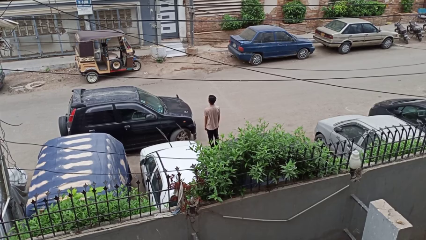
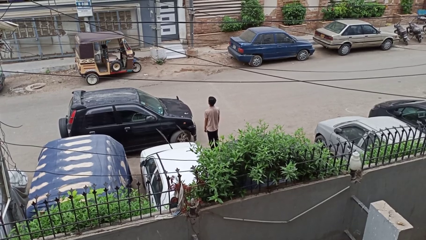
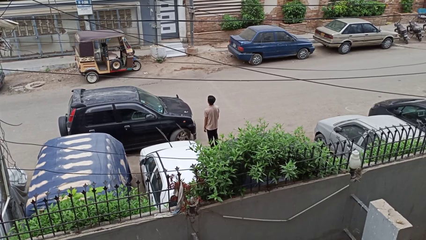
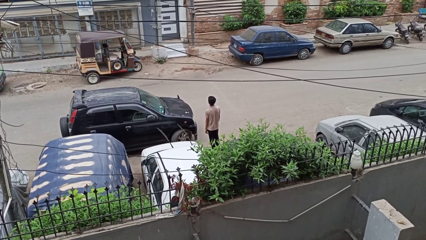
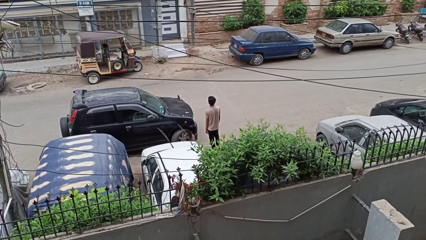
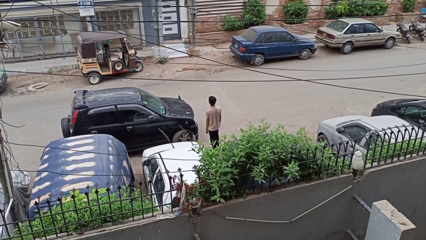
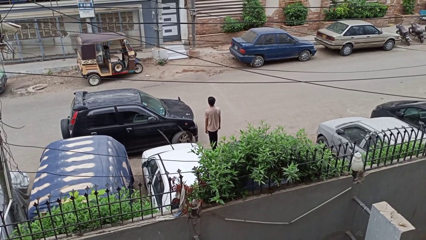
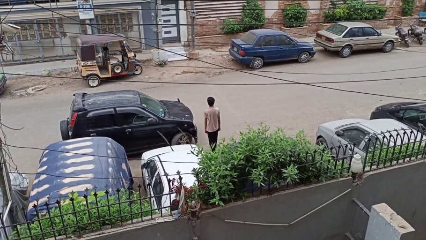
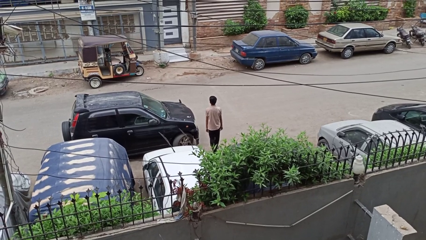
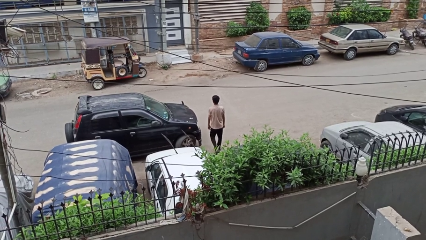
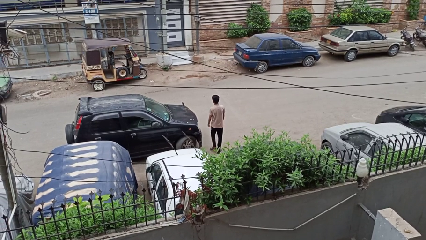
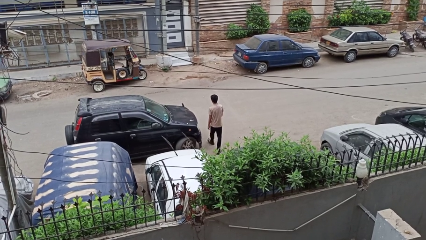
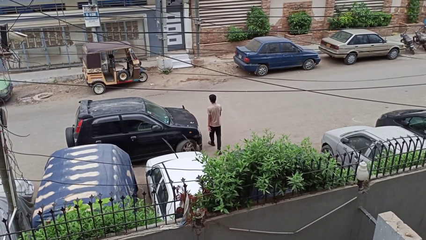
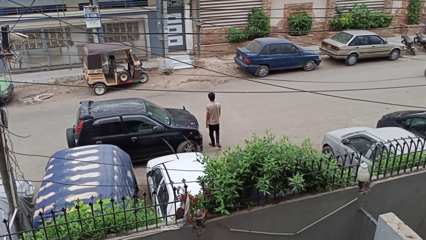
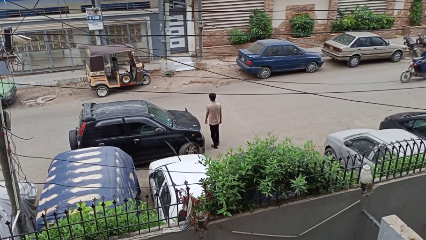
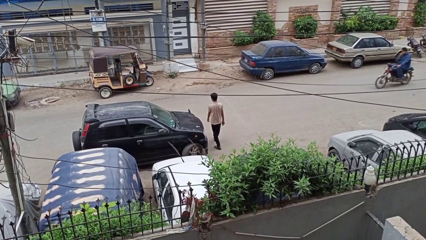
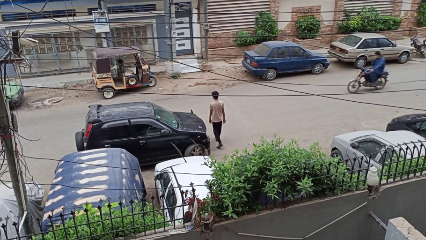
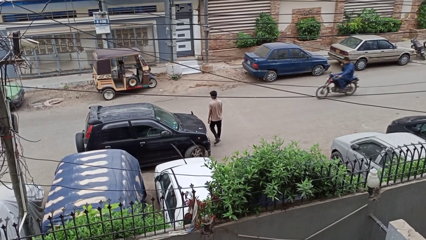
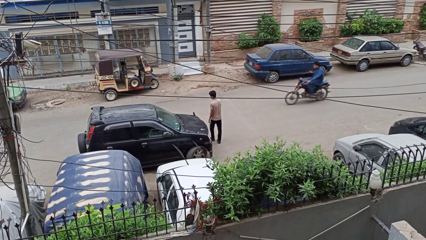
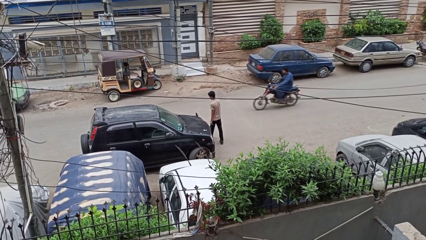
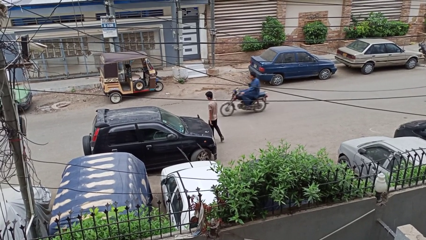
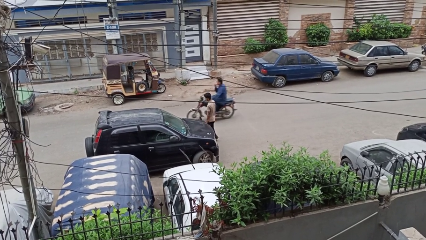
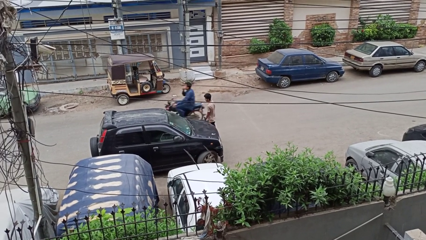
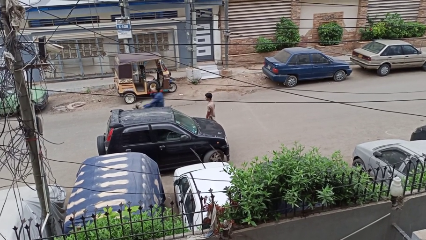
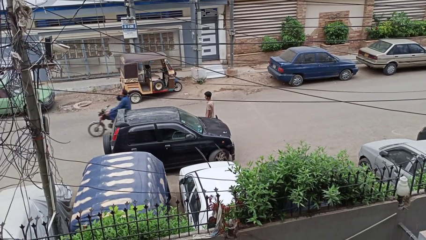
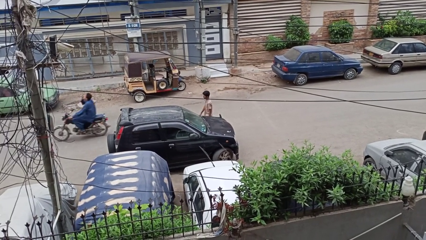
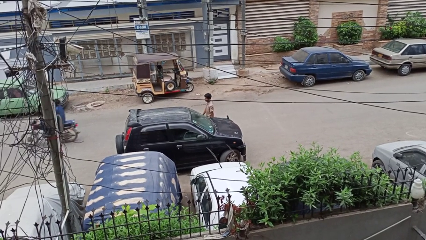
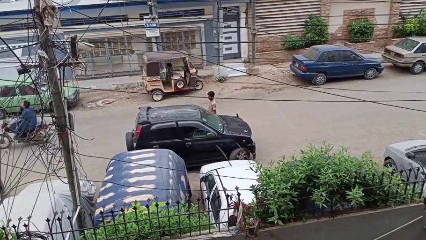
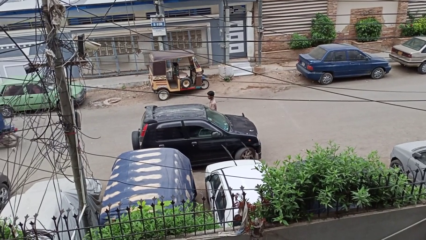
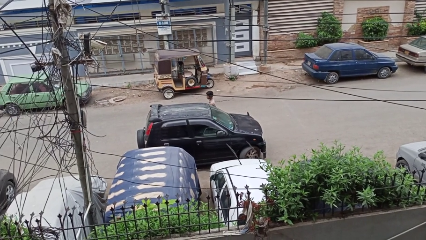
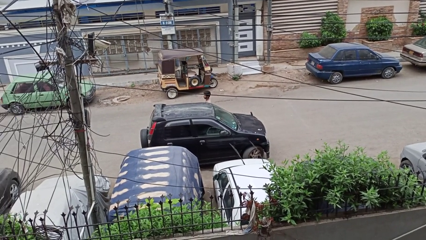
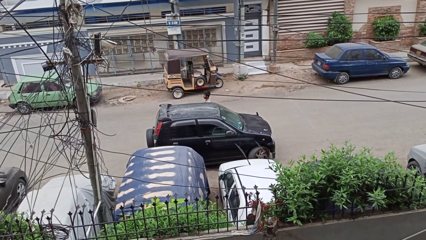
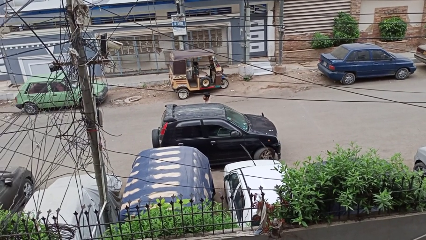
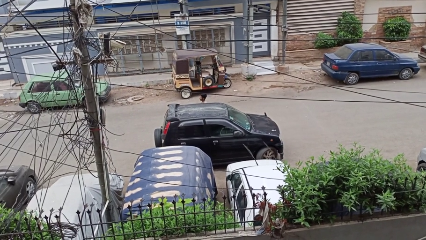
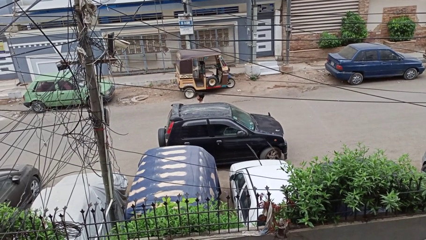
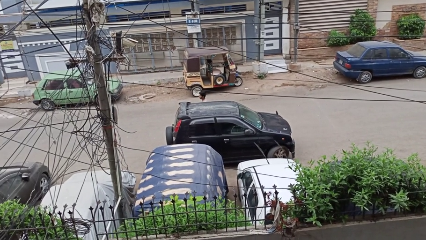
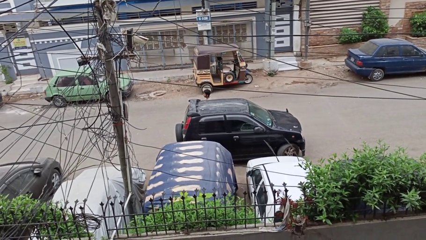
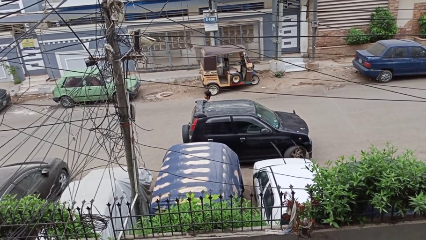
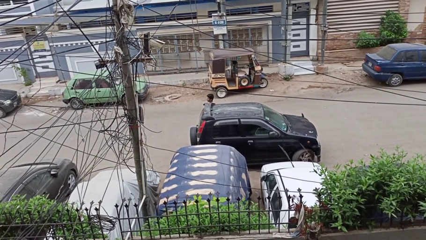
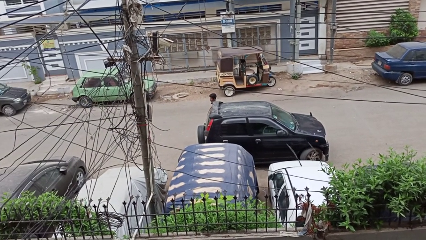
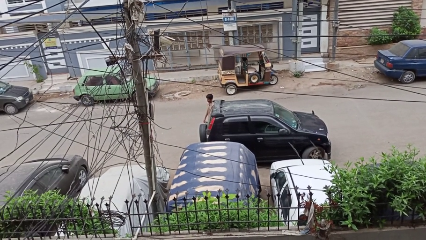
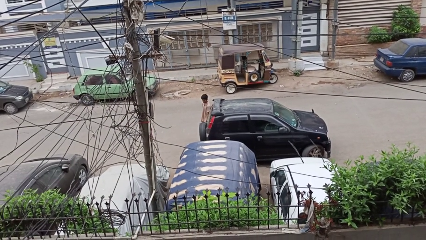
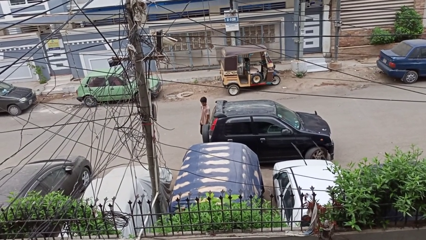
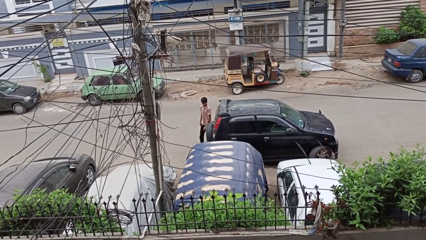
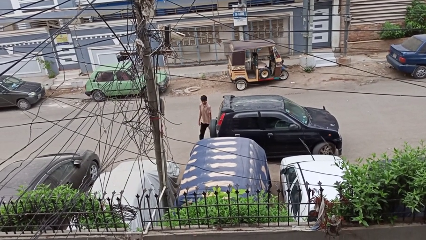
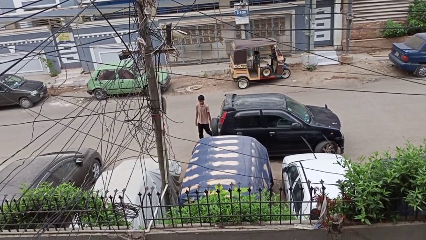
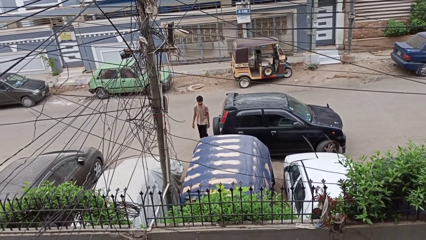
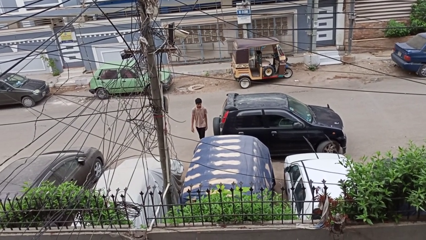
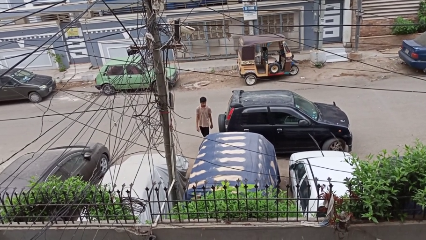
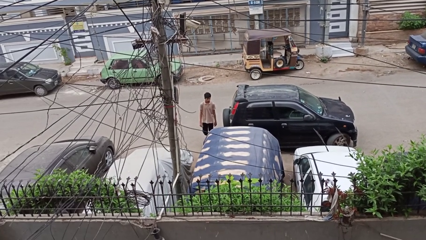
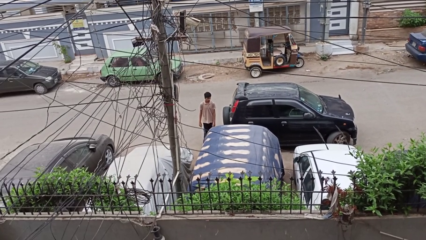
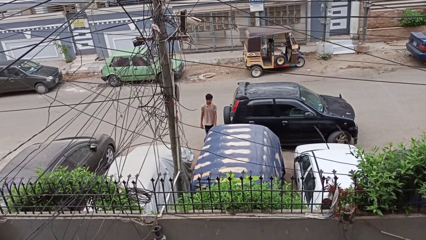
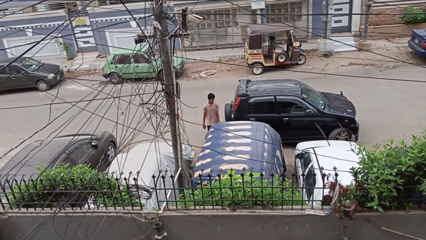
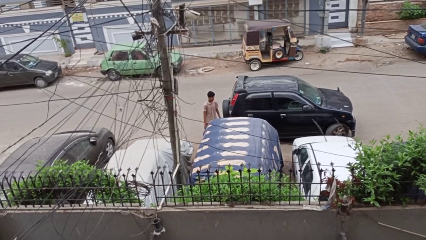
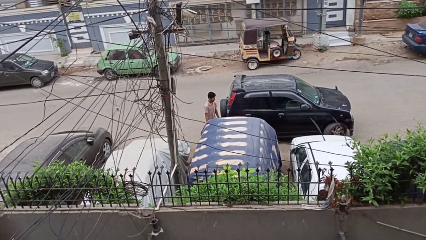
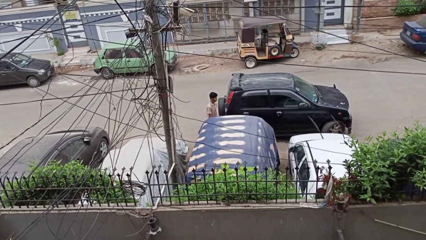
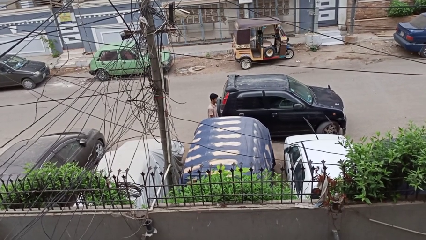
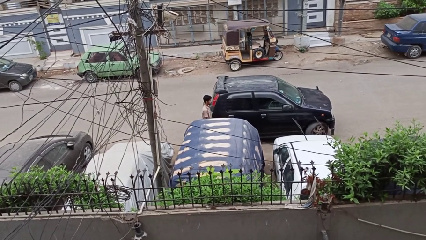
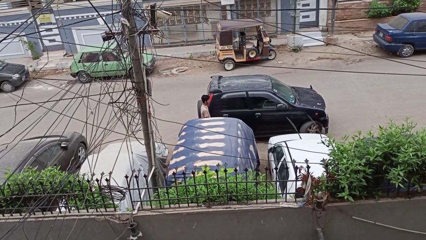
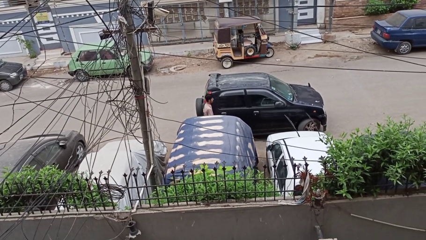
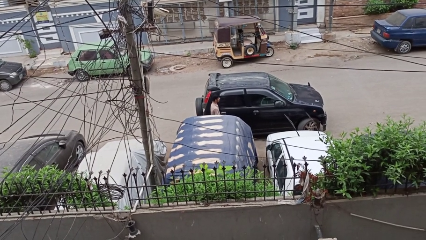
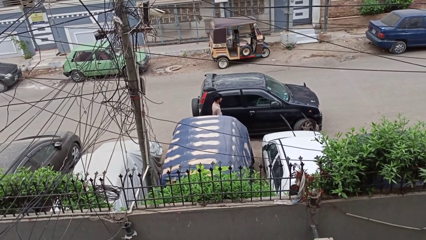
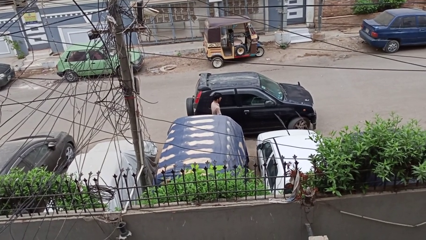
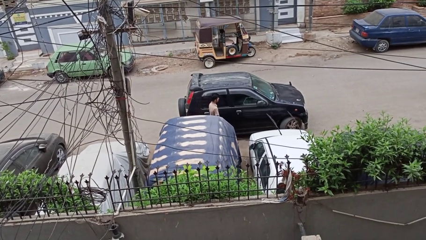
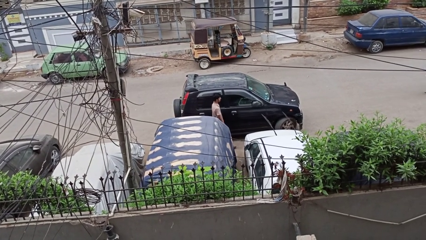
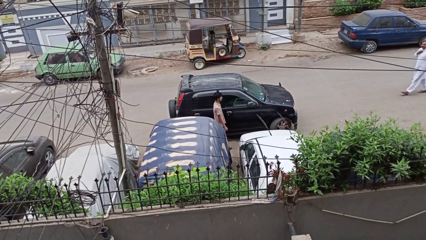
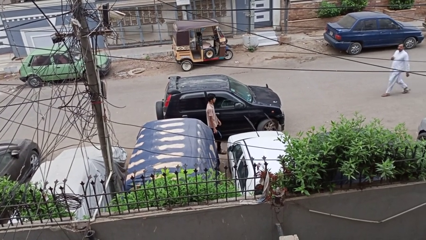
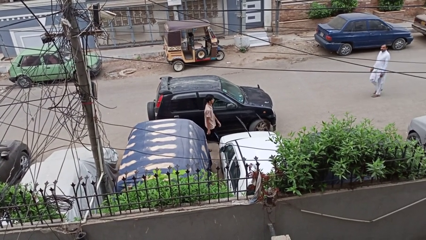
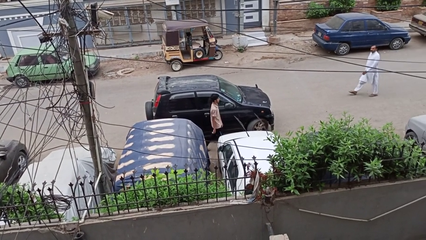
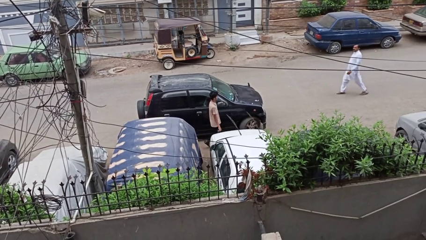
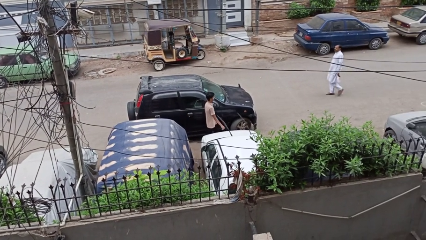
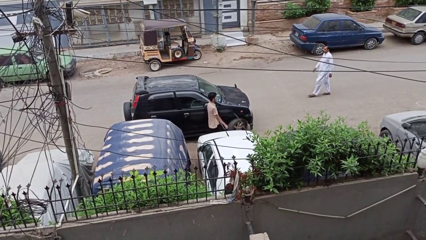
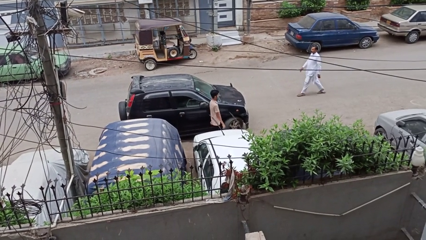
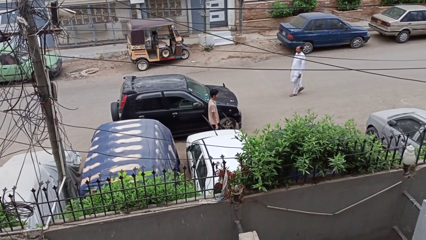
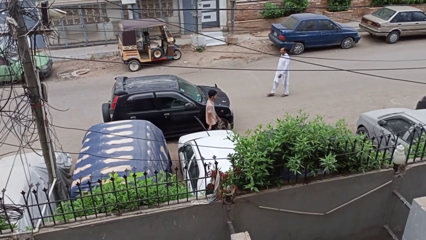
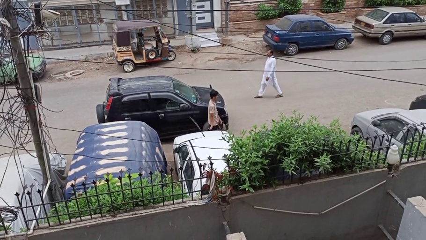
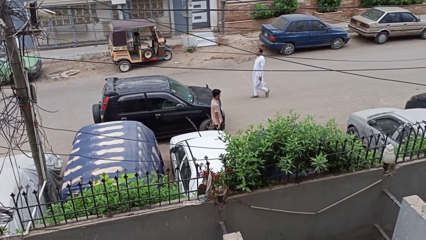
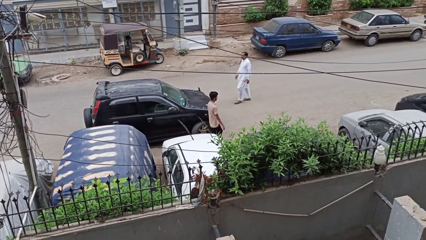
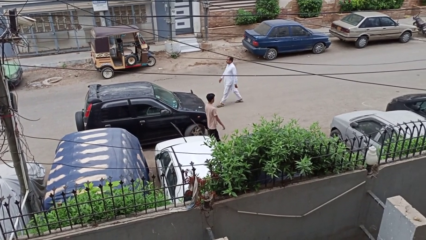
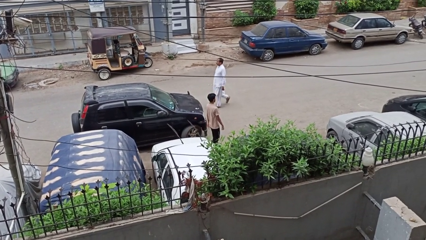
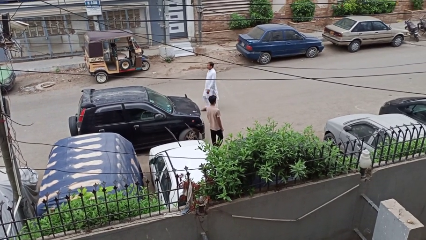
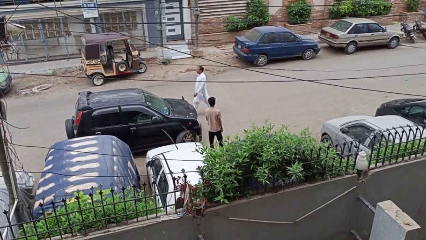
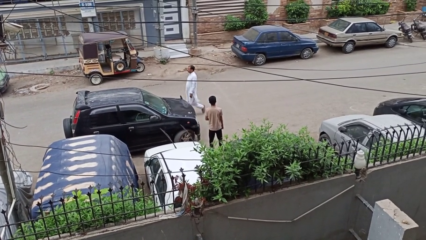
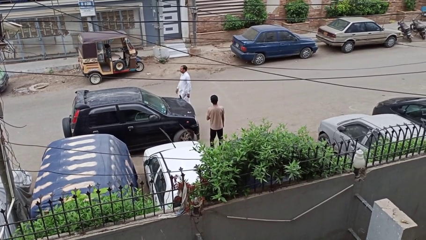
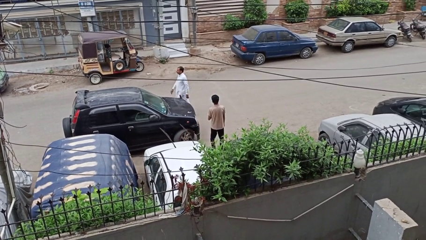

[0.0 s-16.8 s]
person walks around car

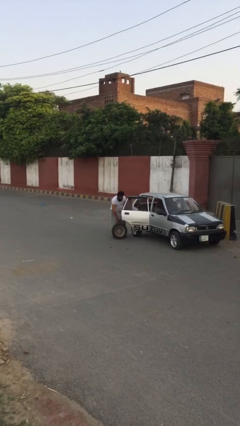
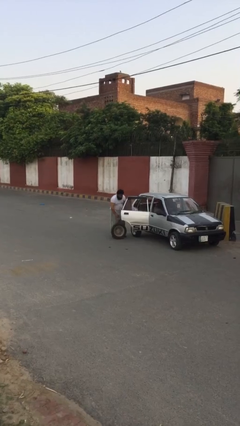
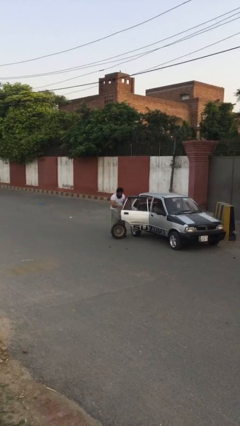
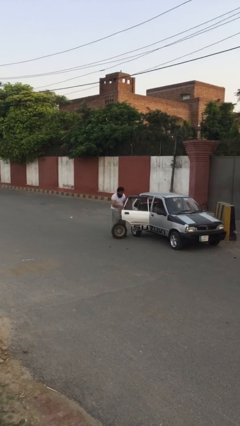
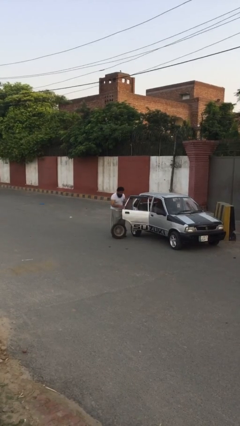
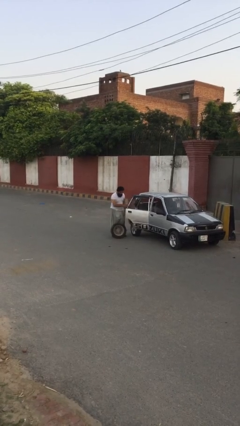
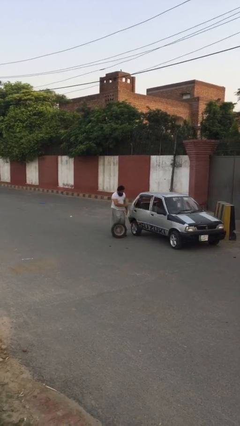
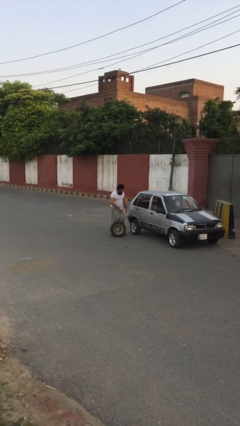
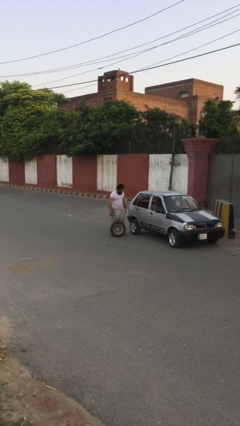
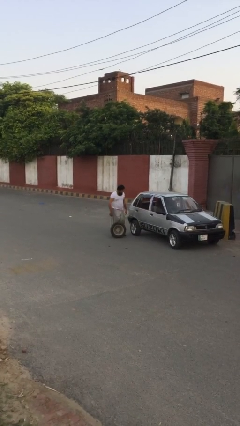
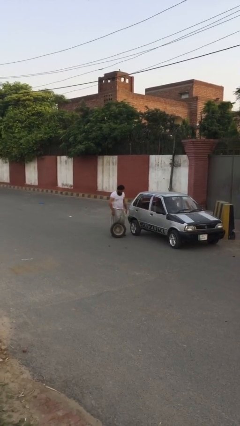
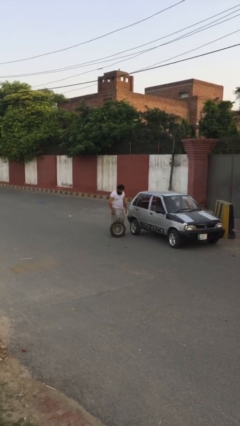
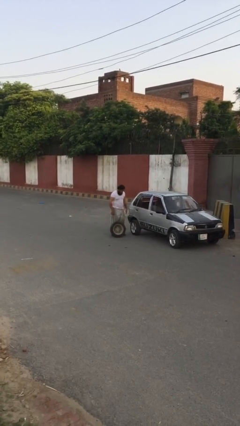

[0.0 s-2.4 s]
person closes car door
